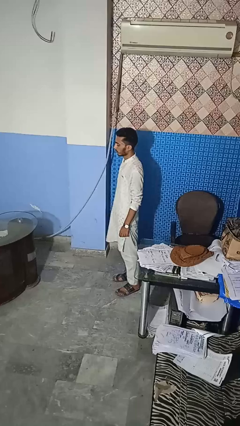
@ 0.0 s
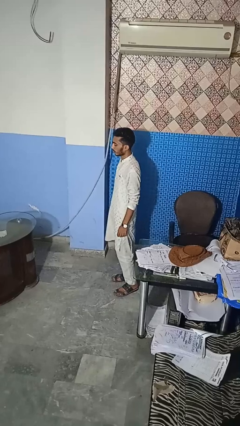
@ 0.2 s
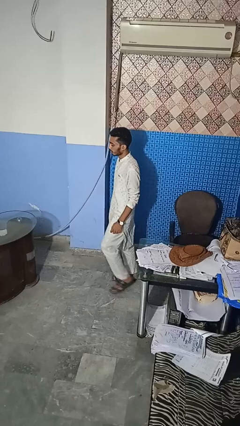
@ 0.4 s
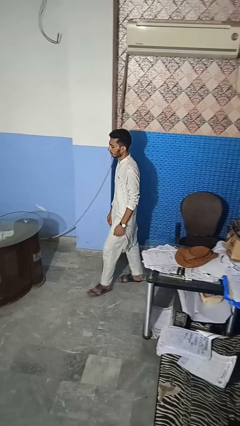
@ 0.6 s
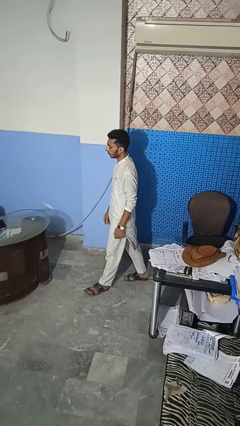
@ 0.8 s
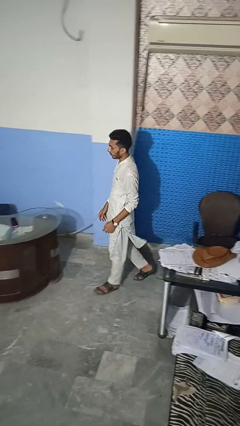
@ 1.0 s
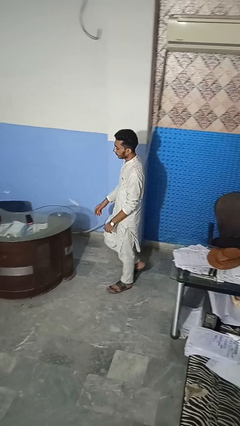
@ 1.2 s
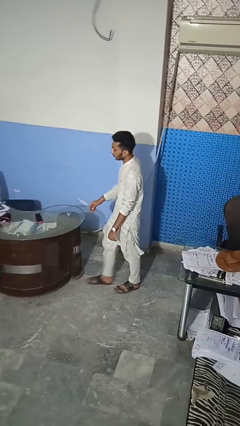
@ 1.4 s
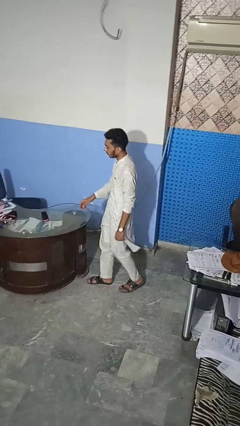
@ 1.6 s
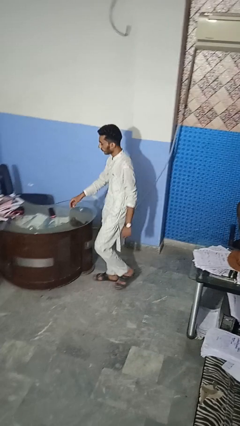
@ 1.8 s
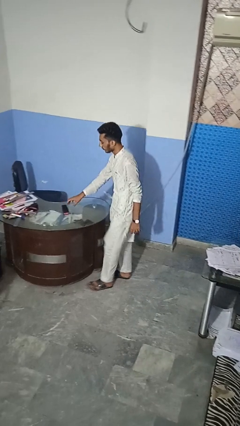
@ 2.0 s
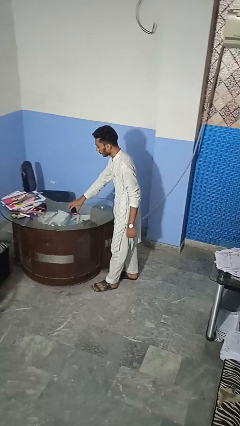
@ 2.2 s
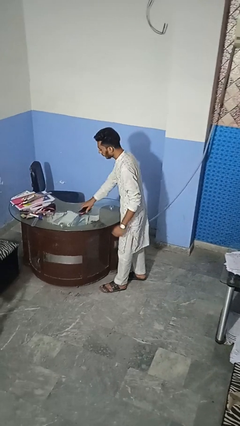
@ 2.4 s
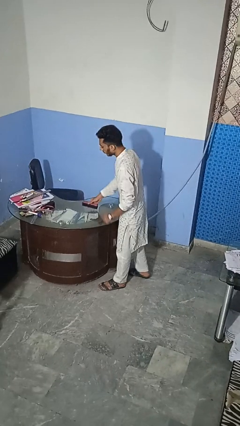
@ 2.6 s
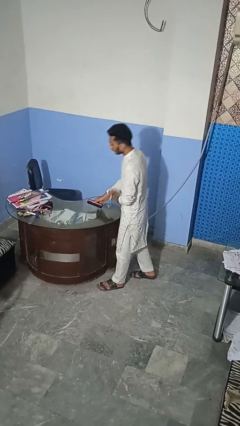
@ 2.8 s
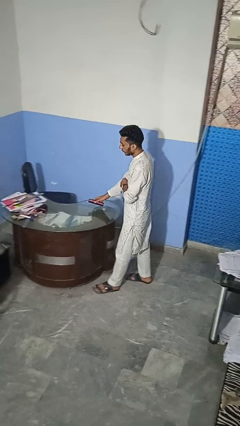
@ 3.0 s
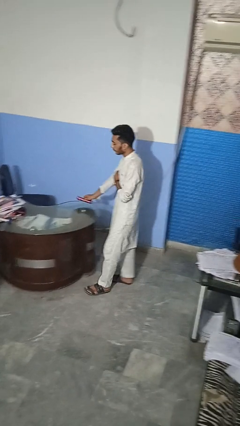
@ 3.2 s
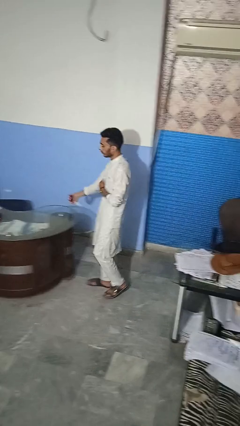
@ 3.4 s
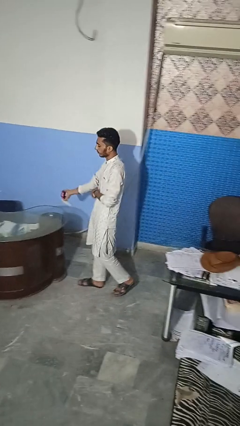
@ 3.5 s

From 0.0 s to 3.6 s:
person picks up object from table

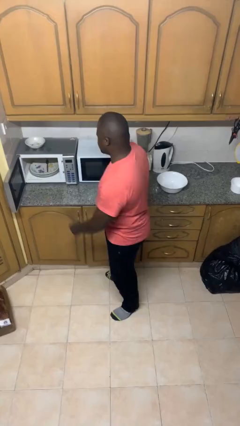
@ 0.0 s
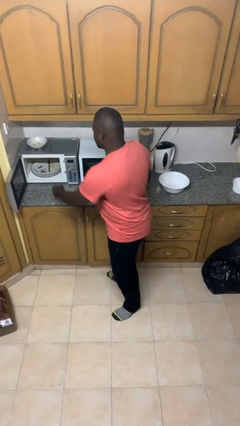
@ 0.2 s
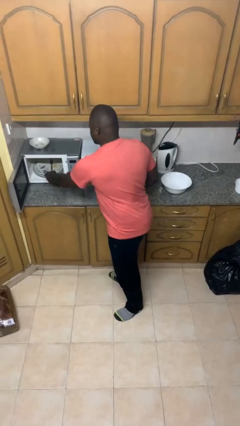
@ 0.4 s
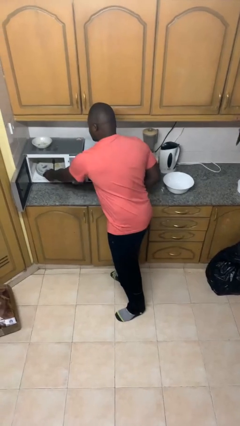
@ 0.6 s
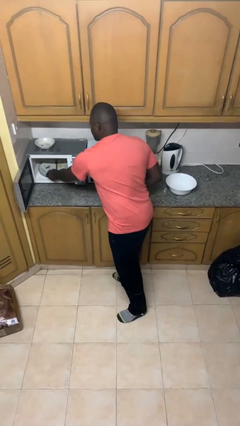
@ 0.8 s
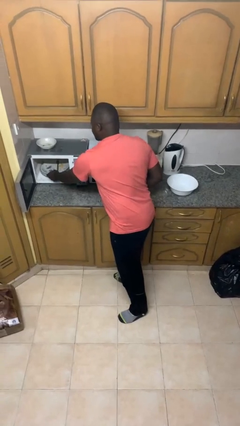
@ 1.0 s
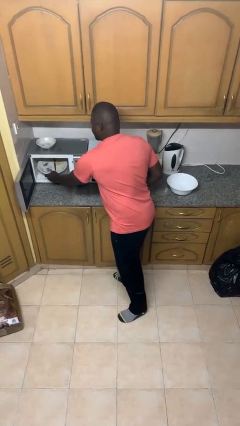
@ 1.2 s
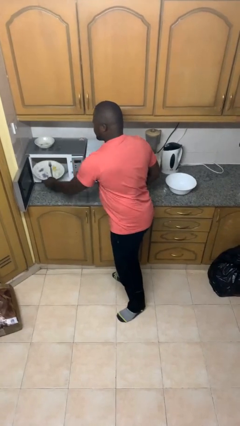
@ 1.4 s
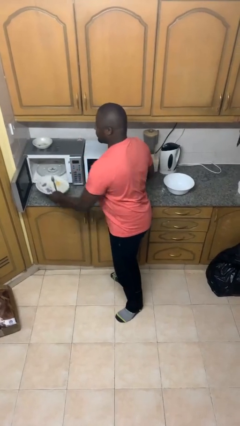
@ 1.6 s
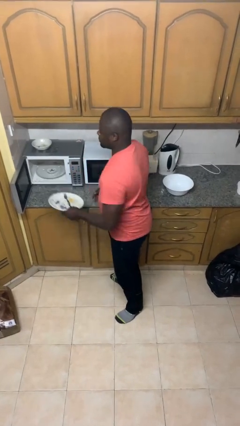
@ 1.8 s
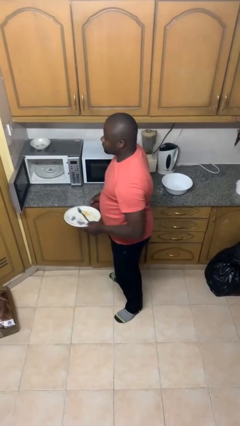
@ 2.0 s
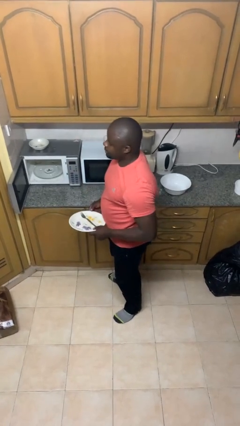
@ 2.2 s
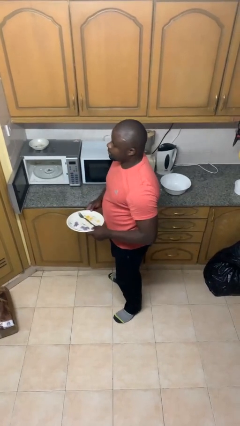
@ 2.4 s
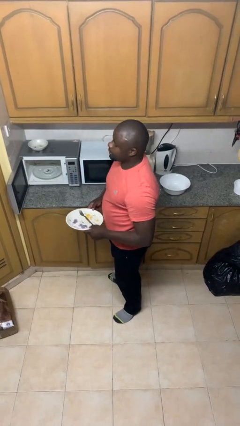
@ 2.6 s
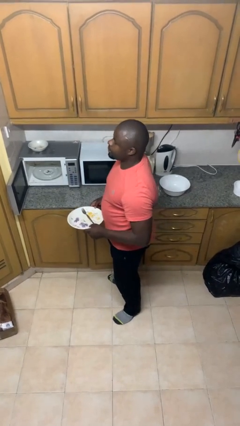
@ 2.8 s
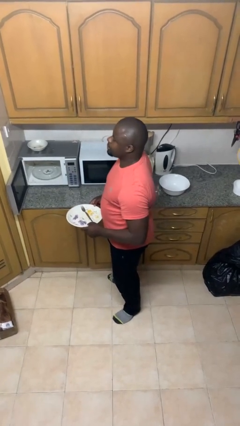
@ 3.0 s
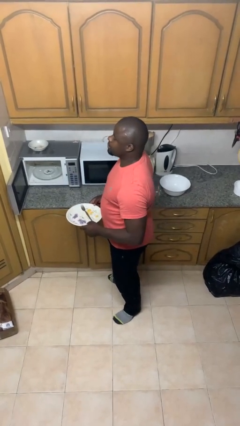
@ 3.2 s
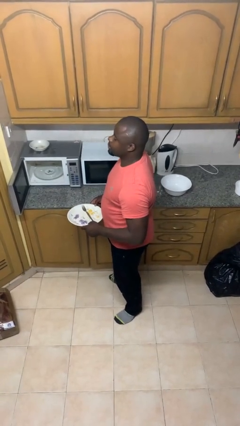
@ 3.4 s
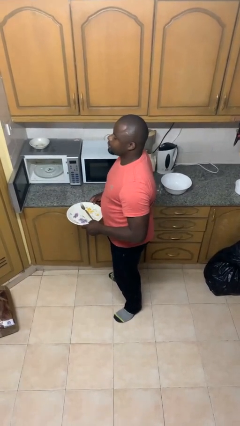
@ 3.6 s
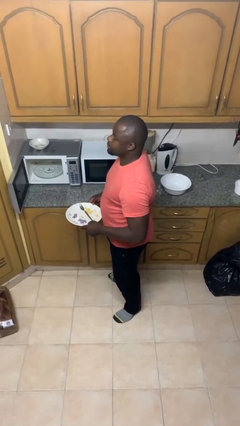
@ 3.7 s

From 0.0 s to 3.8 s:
person takes object from microwave

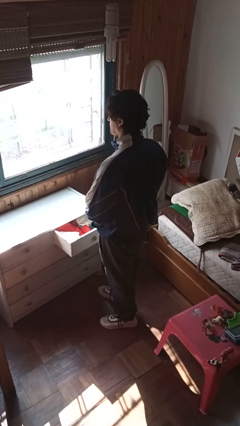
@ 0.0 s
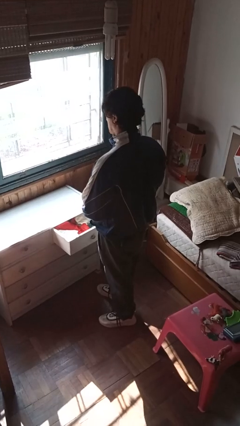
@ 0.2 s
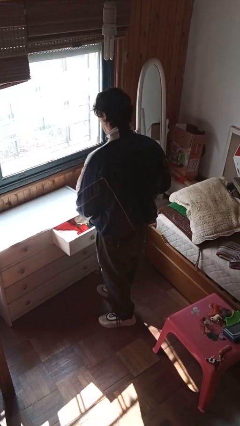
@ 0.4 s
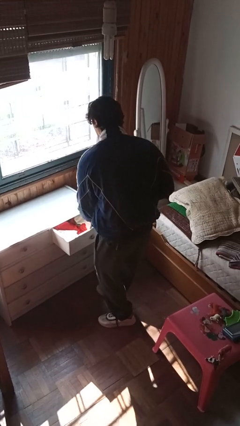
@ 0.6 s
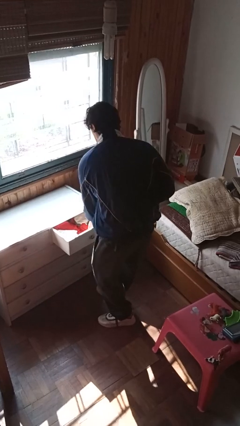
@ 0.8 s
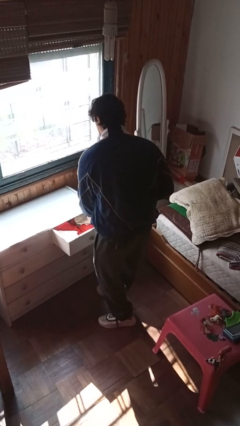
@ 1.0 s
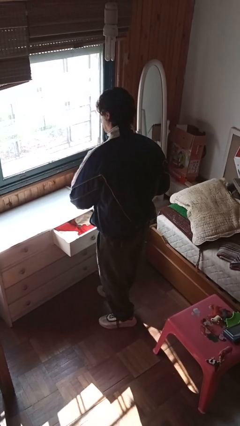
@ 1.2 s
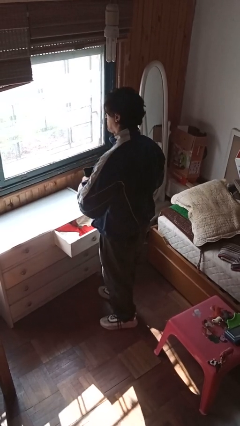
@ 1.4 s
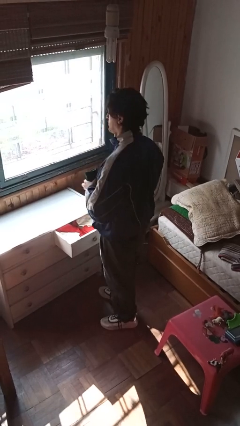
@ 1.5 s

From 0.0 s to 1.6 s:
person takes clothes from dresser

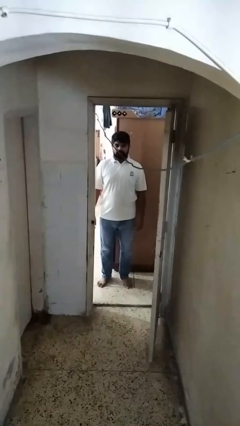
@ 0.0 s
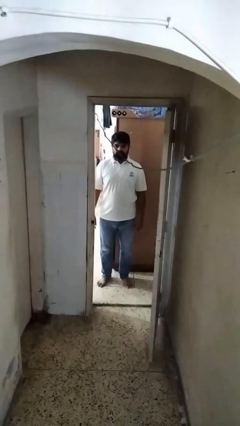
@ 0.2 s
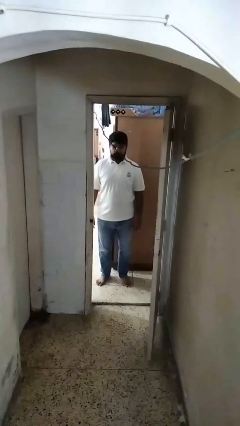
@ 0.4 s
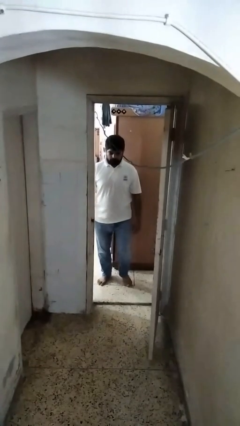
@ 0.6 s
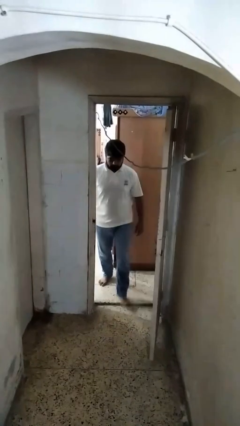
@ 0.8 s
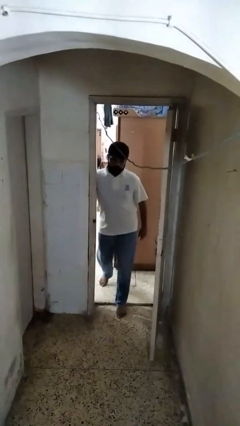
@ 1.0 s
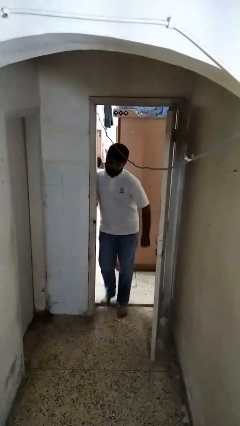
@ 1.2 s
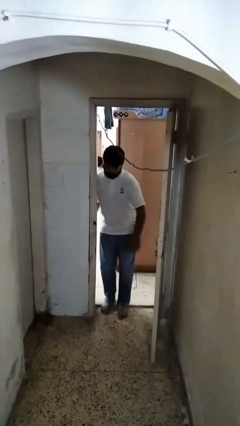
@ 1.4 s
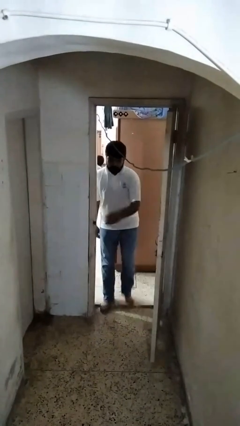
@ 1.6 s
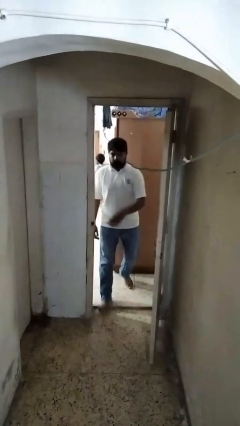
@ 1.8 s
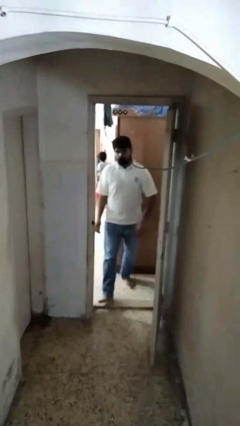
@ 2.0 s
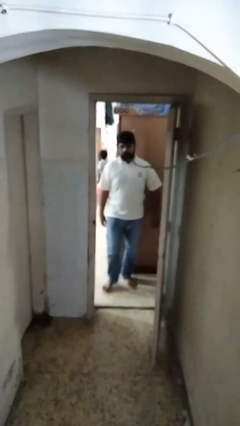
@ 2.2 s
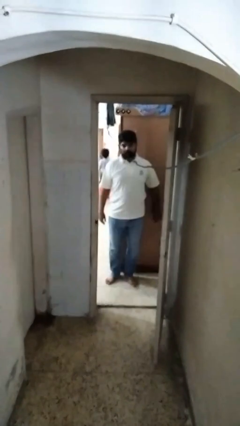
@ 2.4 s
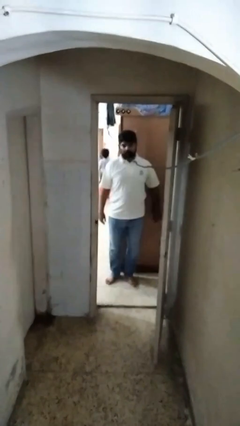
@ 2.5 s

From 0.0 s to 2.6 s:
person bumps into wall

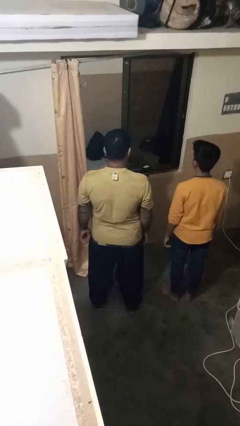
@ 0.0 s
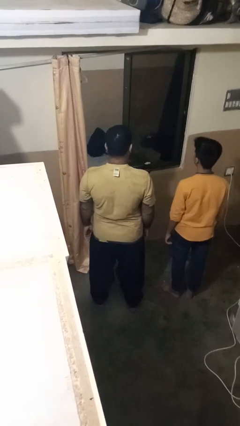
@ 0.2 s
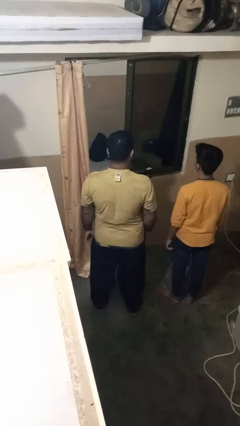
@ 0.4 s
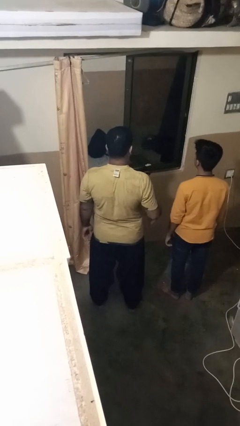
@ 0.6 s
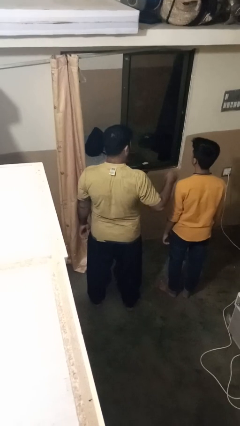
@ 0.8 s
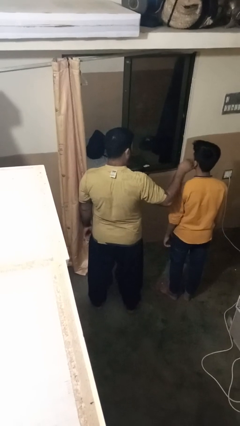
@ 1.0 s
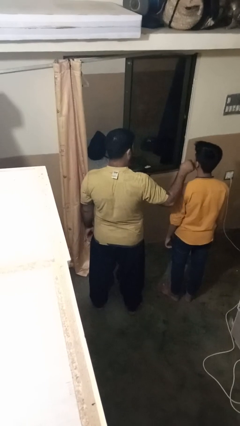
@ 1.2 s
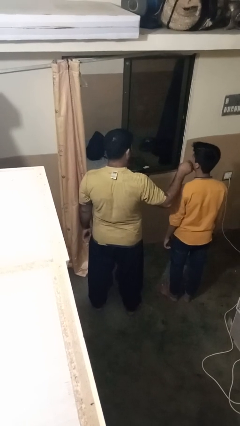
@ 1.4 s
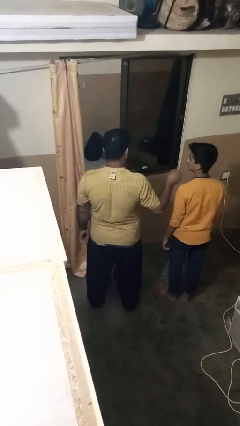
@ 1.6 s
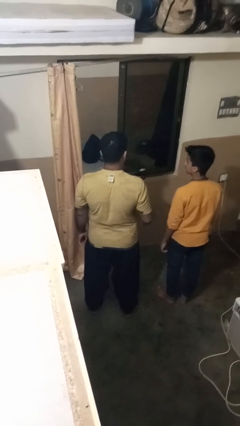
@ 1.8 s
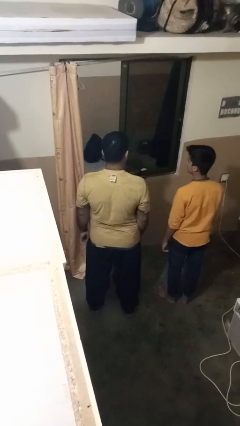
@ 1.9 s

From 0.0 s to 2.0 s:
person touches face of person

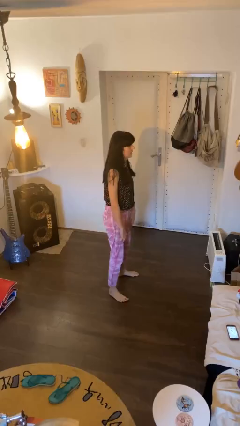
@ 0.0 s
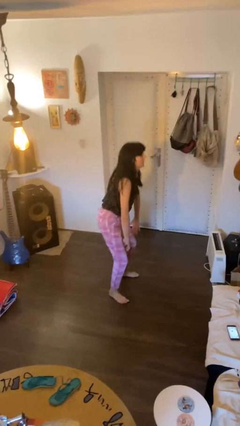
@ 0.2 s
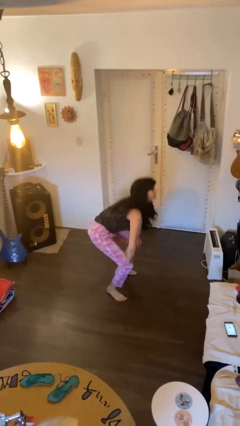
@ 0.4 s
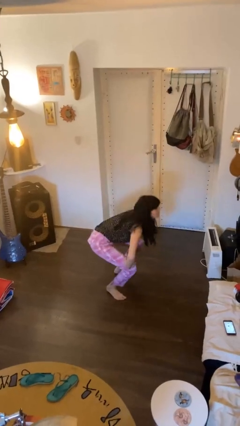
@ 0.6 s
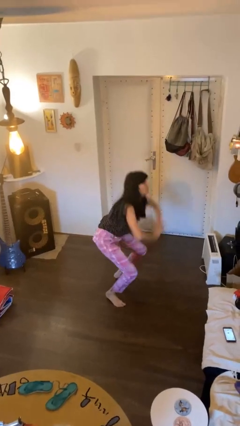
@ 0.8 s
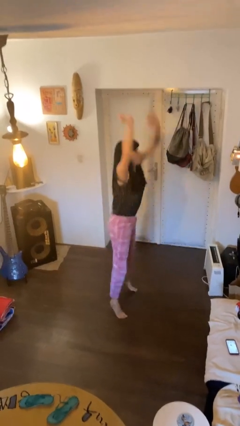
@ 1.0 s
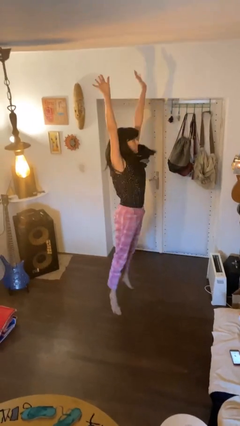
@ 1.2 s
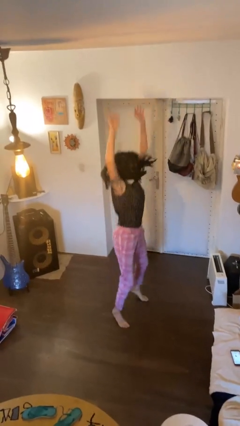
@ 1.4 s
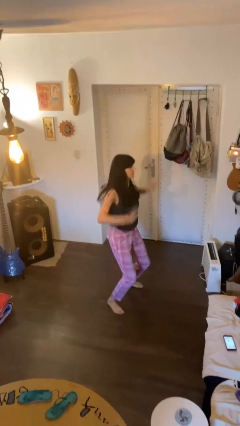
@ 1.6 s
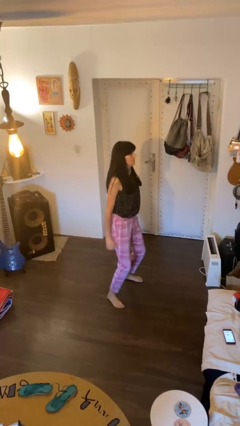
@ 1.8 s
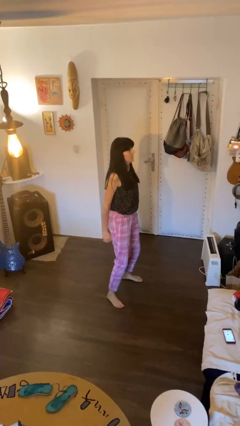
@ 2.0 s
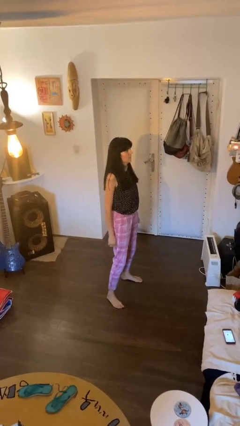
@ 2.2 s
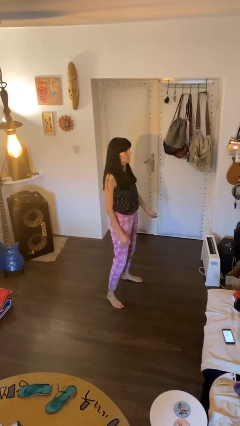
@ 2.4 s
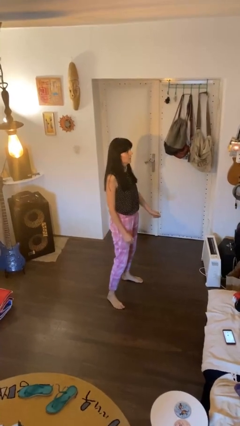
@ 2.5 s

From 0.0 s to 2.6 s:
person jumps

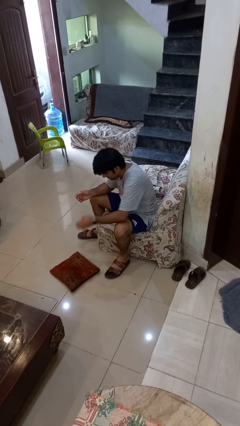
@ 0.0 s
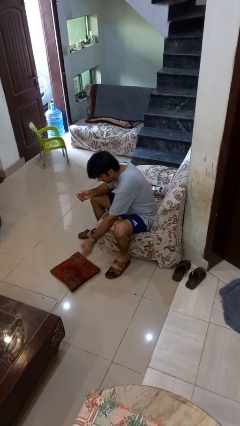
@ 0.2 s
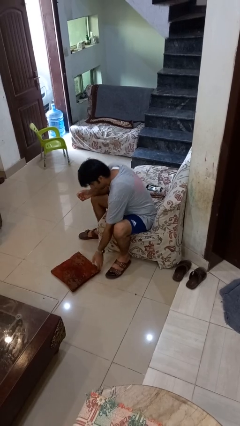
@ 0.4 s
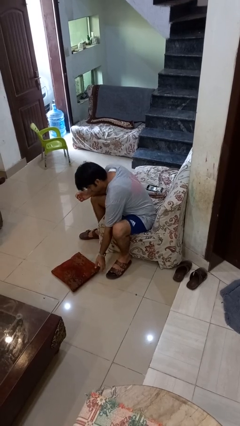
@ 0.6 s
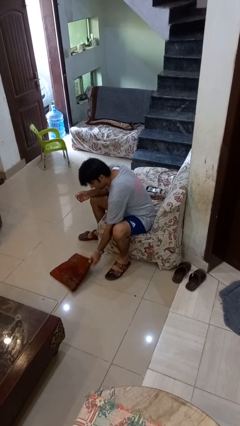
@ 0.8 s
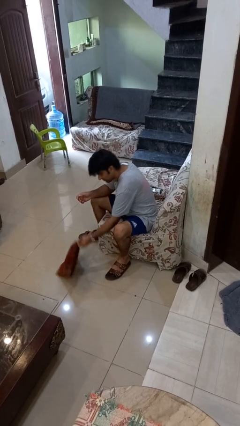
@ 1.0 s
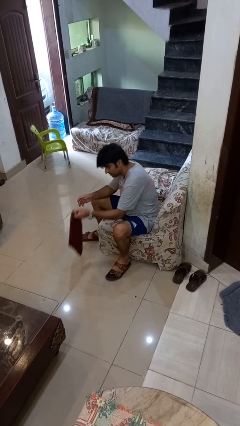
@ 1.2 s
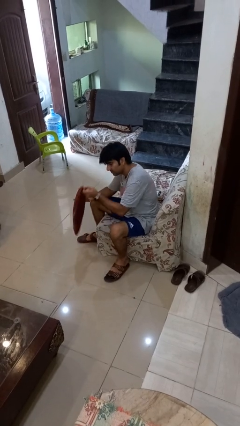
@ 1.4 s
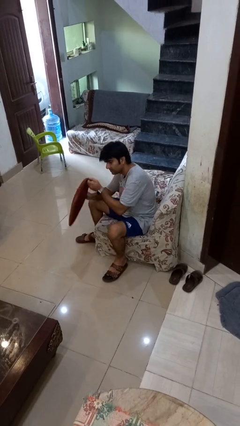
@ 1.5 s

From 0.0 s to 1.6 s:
person picks up object from floor
